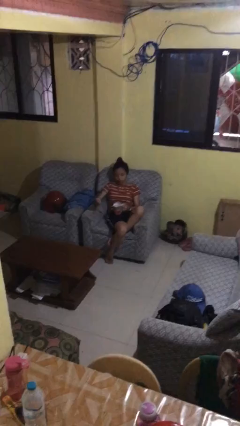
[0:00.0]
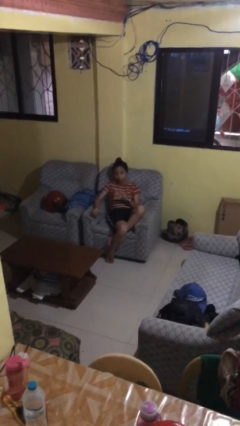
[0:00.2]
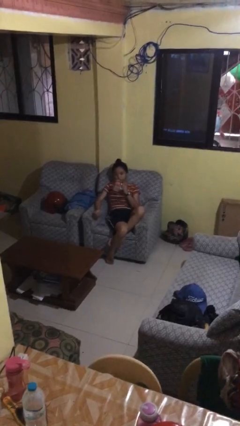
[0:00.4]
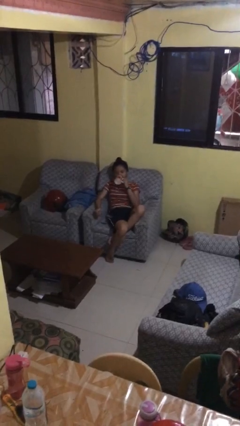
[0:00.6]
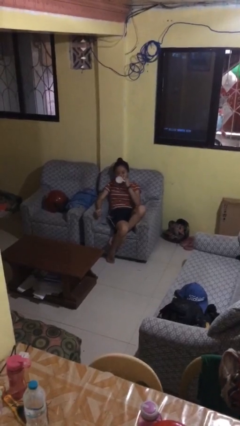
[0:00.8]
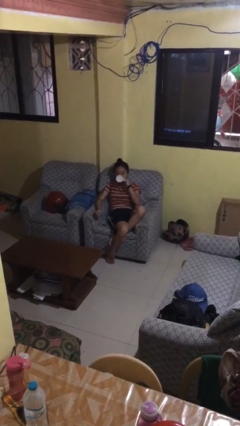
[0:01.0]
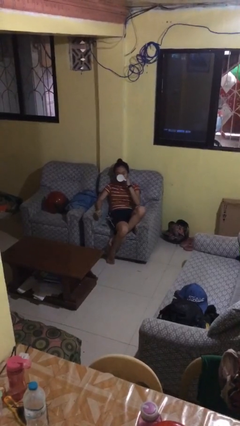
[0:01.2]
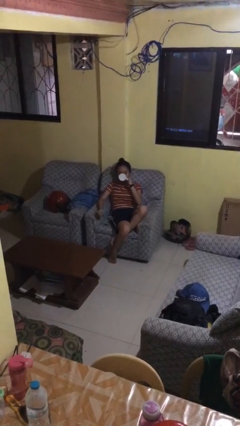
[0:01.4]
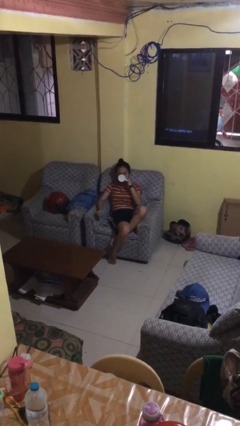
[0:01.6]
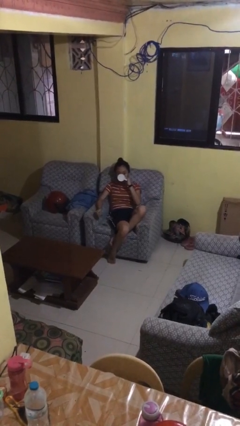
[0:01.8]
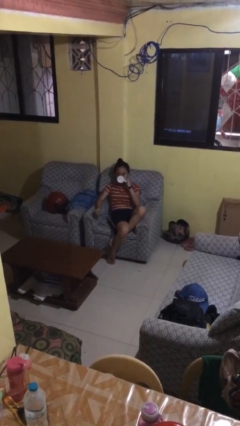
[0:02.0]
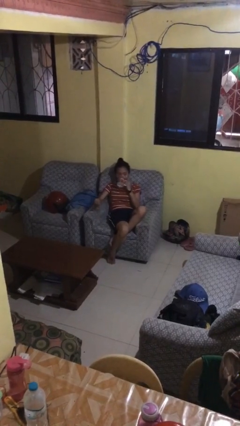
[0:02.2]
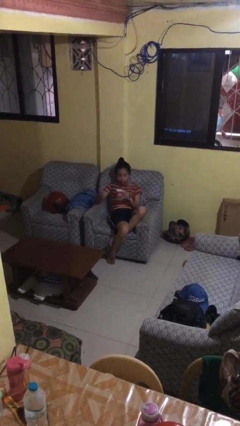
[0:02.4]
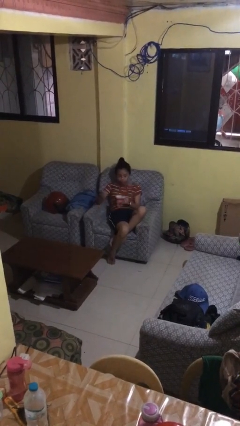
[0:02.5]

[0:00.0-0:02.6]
person drinks from mug

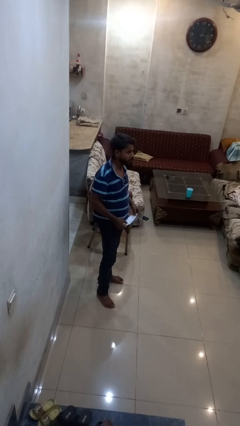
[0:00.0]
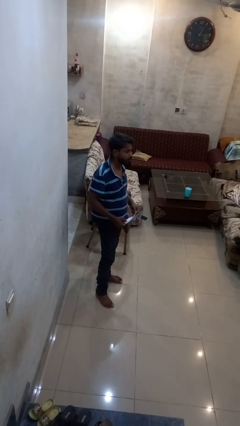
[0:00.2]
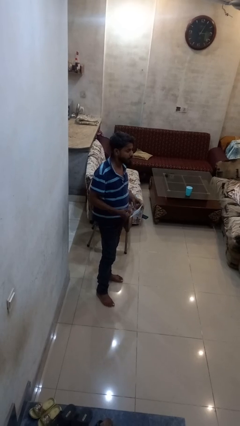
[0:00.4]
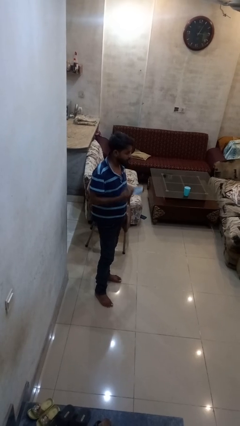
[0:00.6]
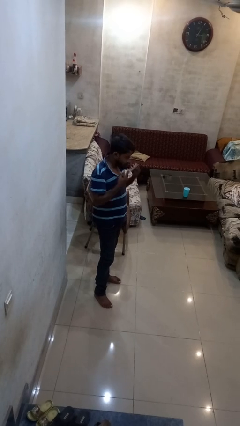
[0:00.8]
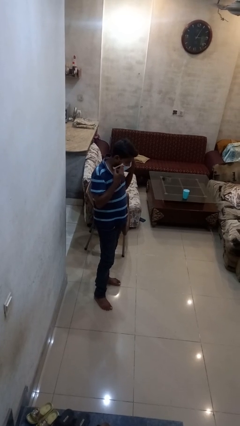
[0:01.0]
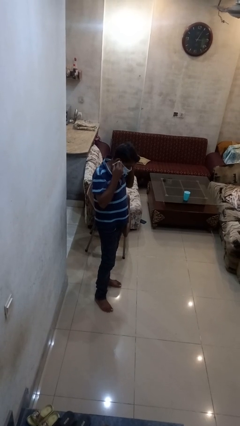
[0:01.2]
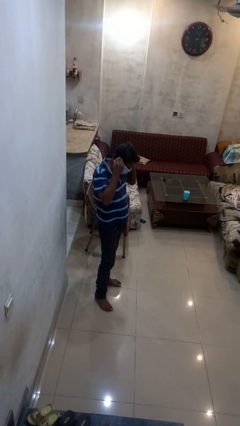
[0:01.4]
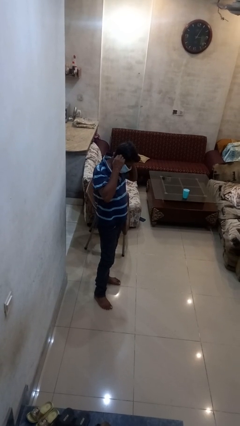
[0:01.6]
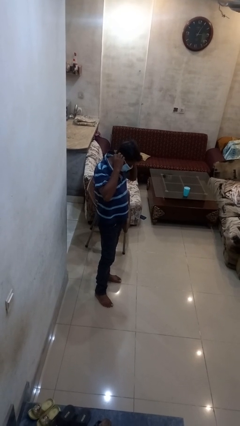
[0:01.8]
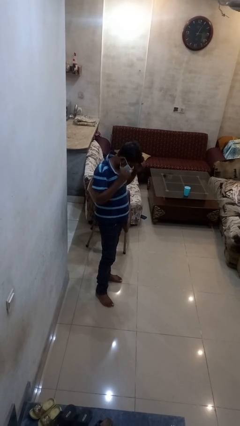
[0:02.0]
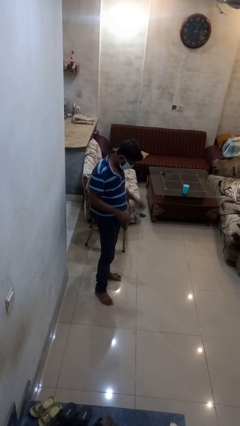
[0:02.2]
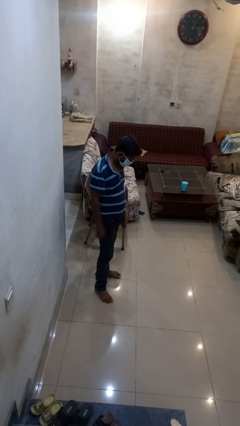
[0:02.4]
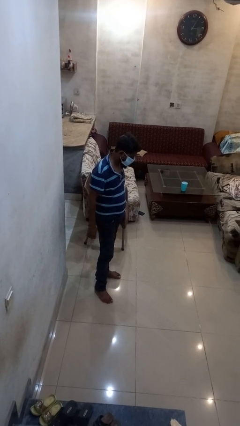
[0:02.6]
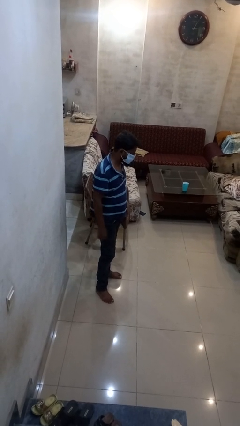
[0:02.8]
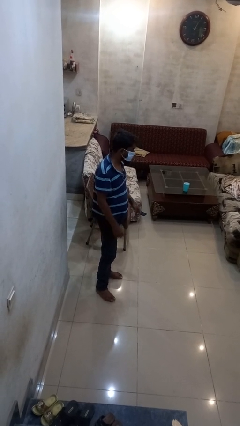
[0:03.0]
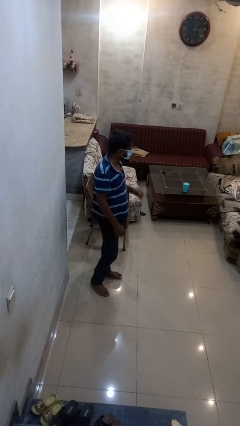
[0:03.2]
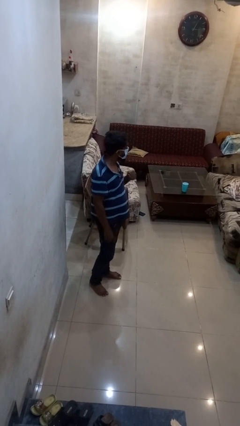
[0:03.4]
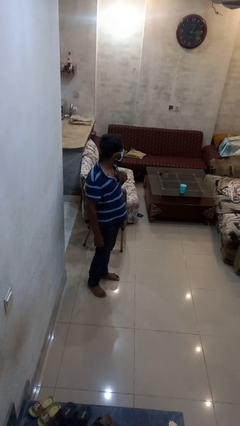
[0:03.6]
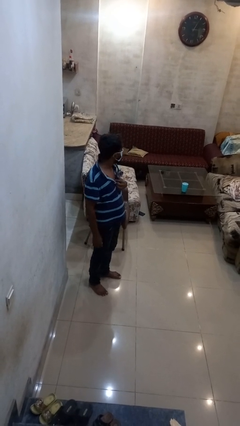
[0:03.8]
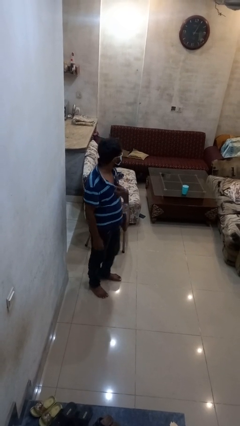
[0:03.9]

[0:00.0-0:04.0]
person puts on facemask

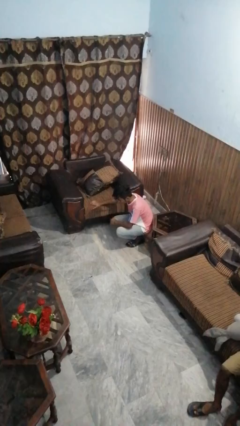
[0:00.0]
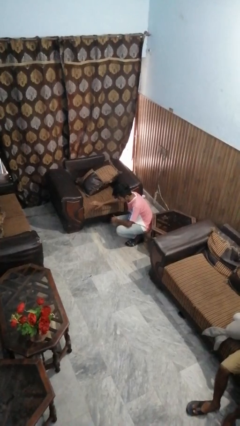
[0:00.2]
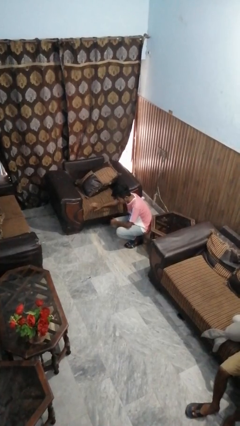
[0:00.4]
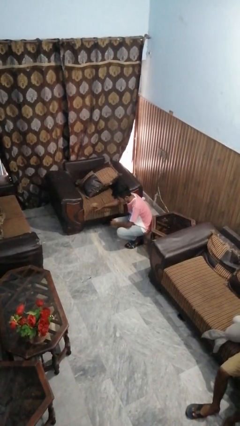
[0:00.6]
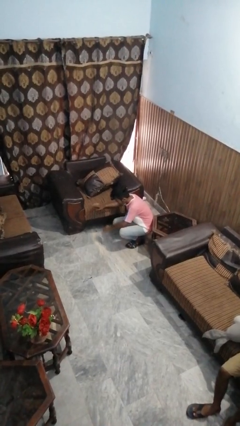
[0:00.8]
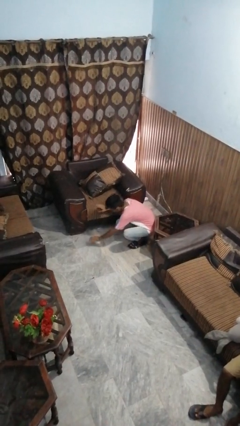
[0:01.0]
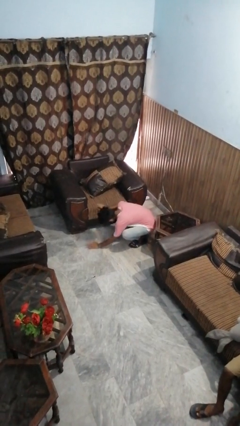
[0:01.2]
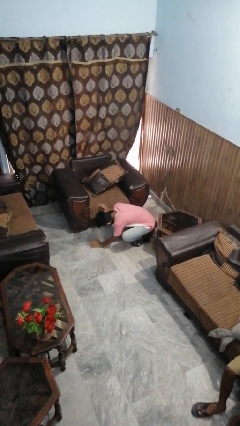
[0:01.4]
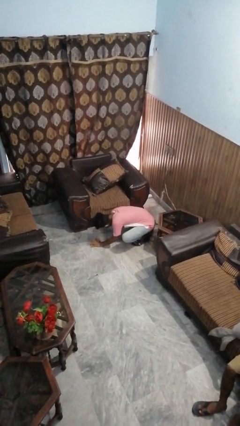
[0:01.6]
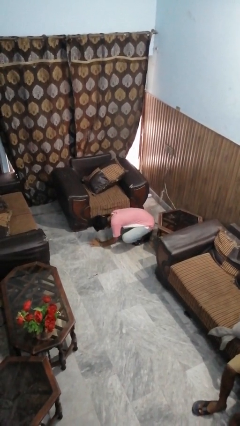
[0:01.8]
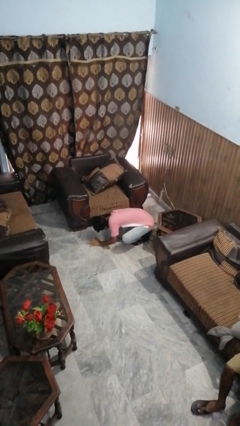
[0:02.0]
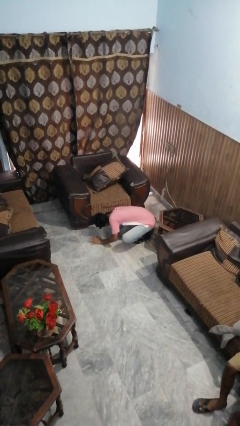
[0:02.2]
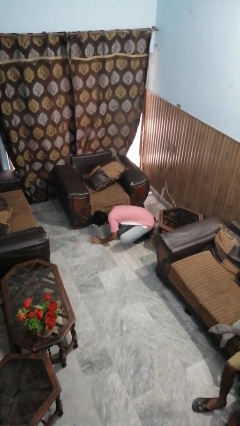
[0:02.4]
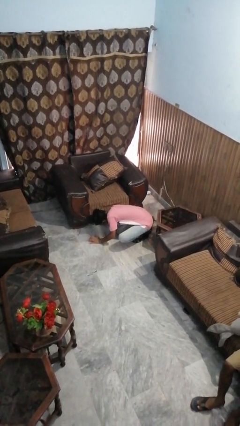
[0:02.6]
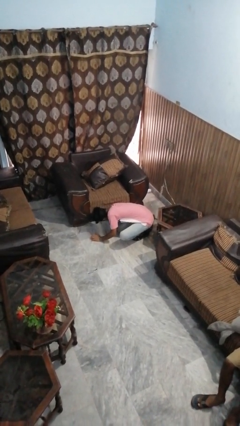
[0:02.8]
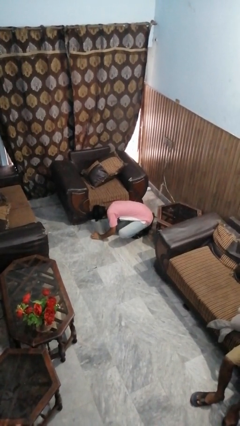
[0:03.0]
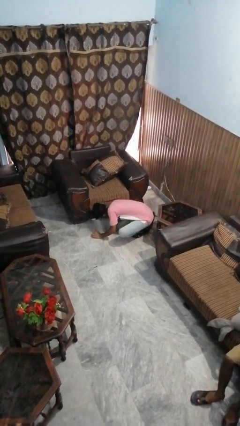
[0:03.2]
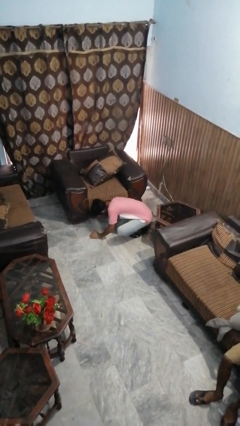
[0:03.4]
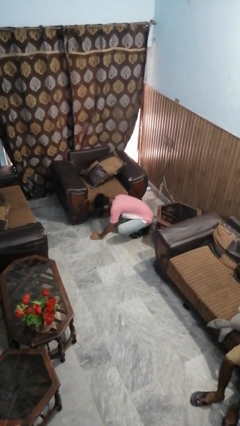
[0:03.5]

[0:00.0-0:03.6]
person searches under couch

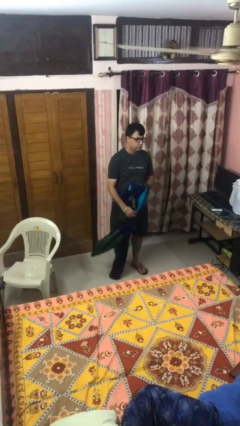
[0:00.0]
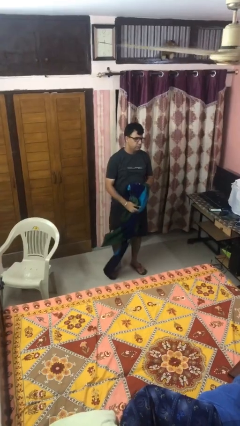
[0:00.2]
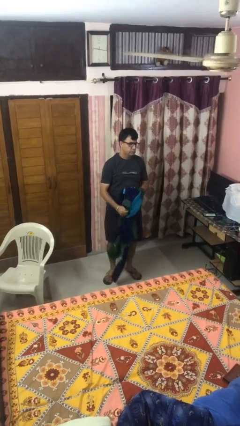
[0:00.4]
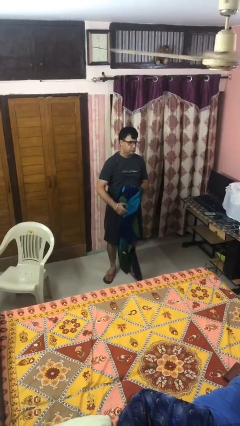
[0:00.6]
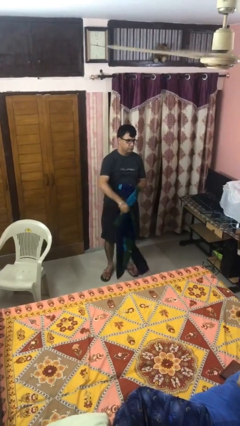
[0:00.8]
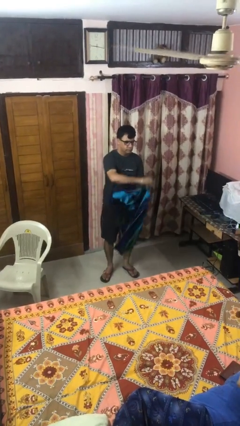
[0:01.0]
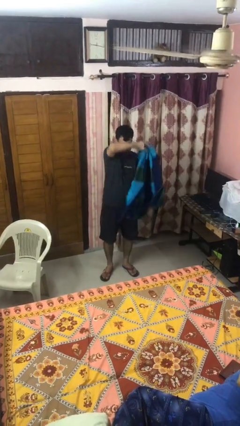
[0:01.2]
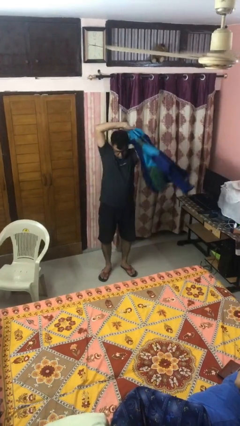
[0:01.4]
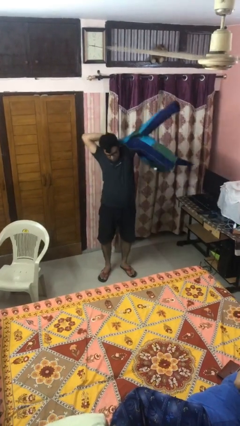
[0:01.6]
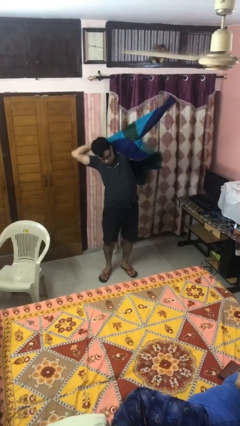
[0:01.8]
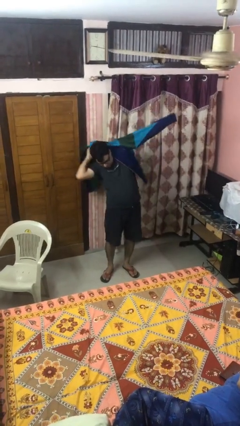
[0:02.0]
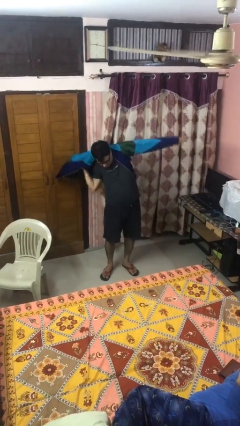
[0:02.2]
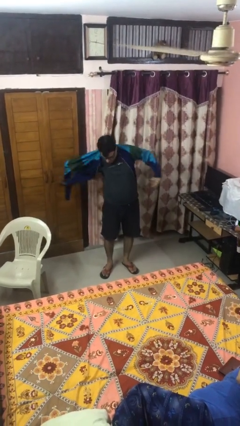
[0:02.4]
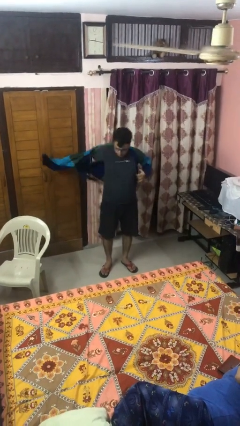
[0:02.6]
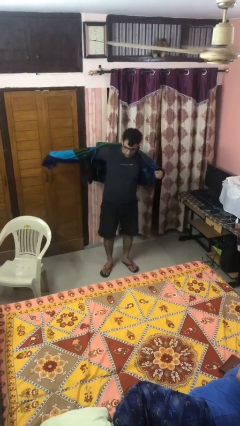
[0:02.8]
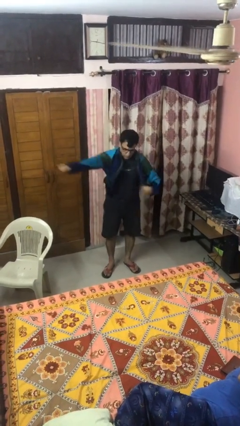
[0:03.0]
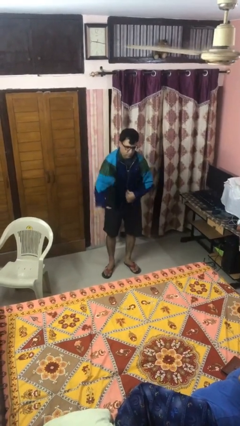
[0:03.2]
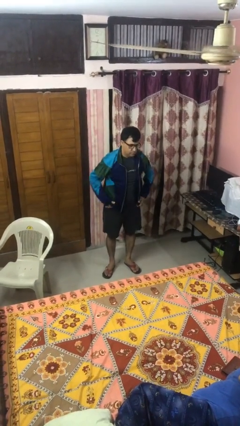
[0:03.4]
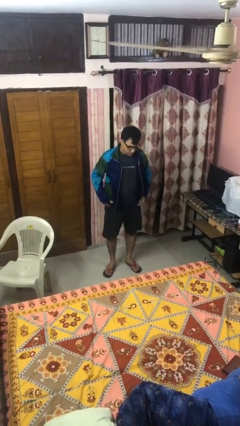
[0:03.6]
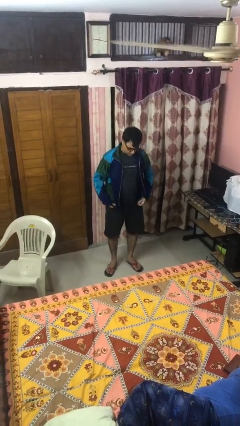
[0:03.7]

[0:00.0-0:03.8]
person puts on jacket

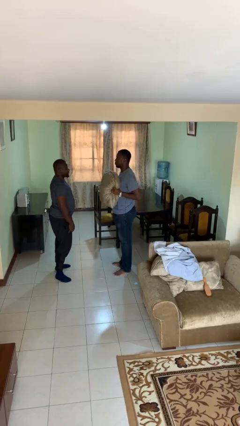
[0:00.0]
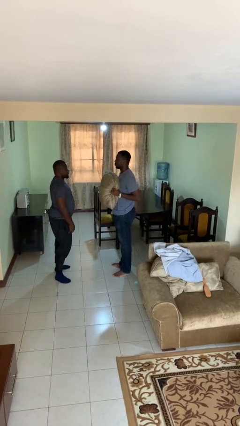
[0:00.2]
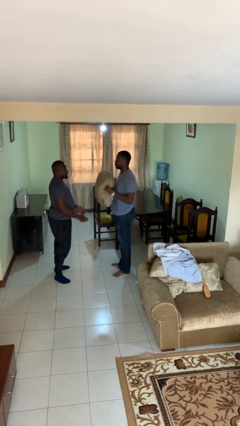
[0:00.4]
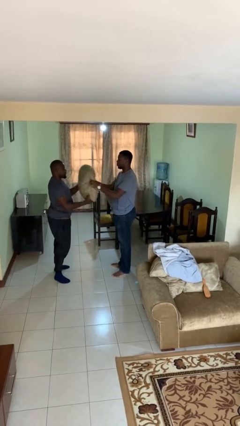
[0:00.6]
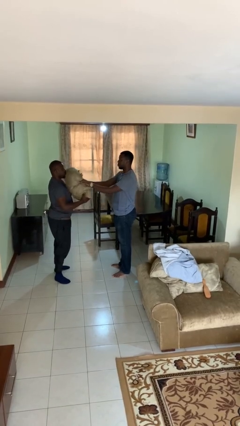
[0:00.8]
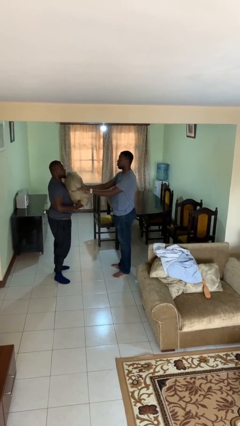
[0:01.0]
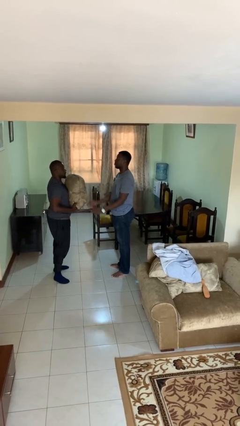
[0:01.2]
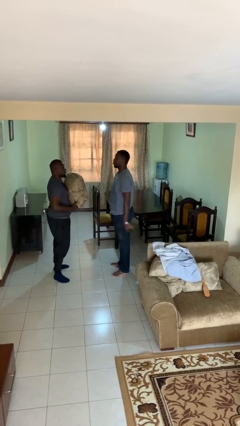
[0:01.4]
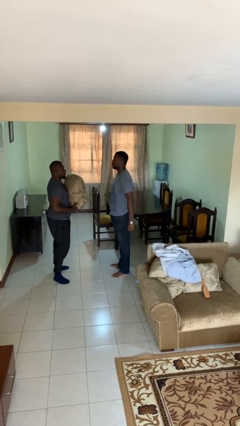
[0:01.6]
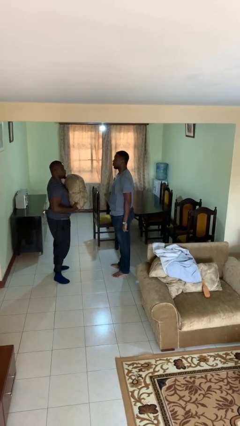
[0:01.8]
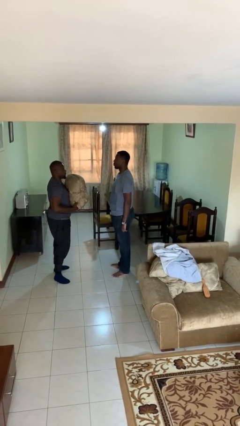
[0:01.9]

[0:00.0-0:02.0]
person transfers object to person

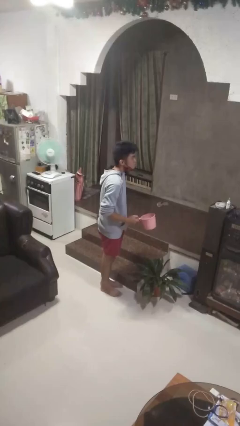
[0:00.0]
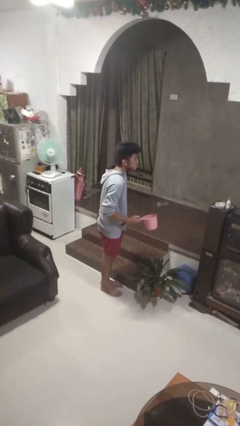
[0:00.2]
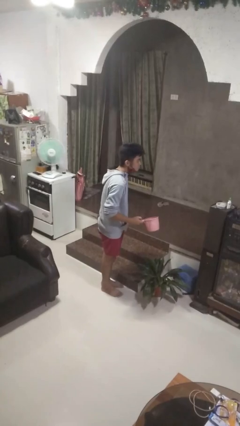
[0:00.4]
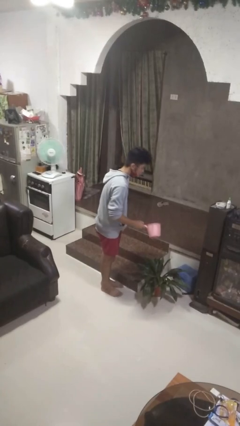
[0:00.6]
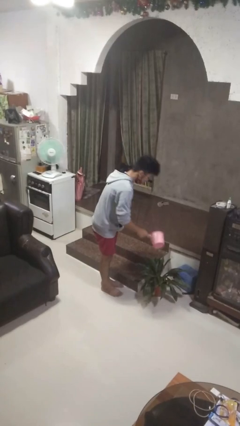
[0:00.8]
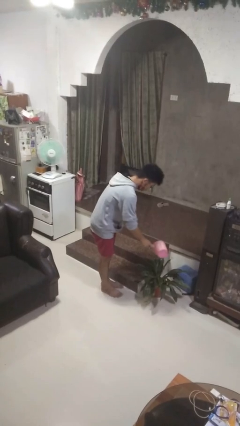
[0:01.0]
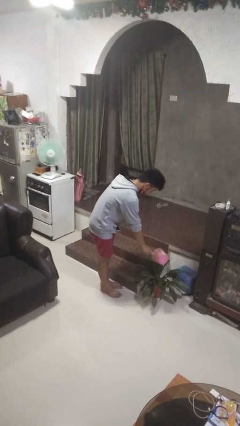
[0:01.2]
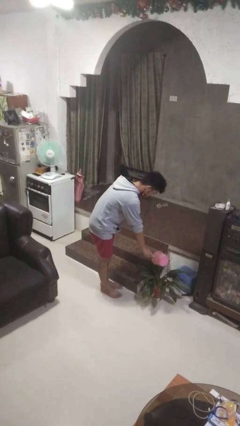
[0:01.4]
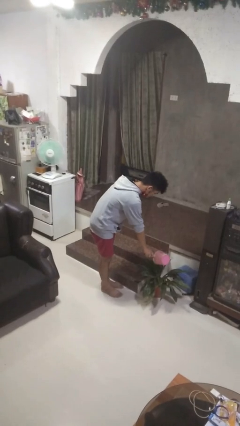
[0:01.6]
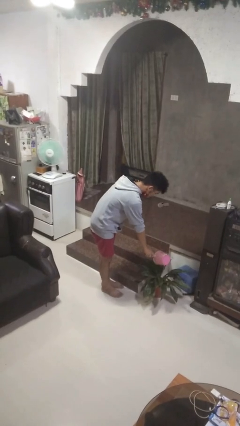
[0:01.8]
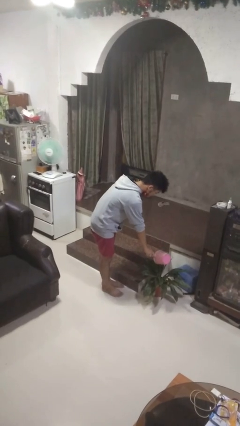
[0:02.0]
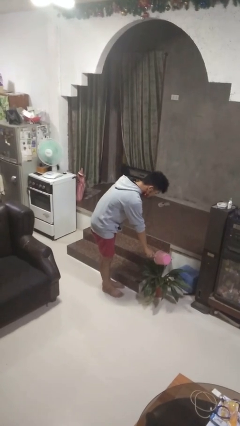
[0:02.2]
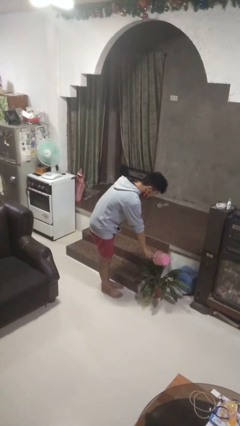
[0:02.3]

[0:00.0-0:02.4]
person waters houseplant
